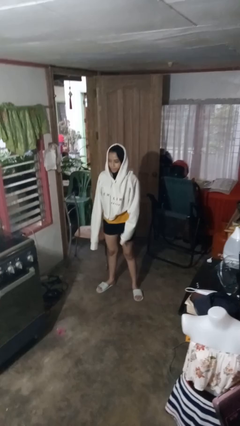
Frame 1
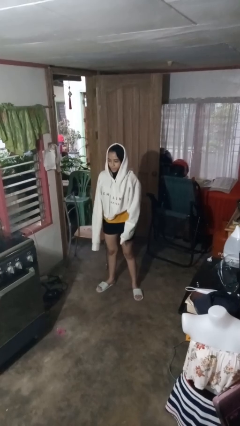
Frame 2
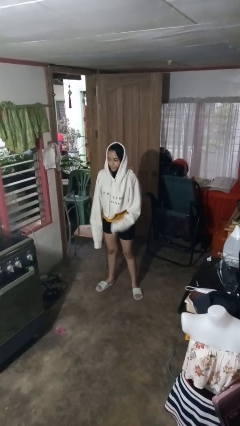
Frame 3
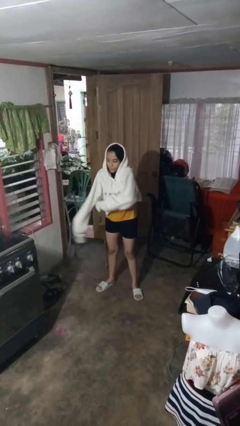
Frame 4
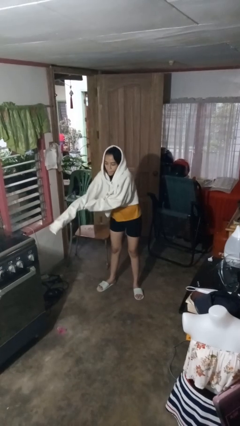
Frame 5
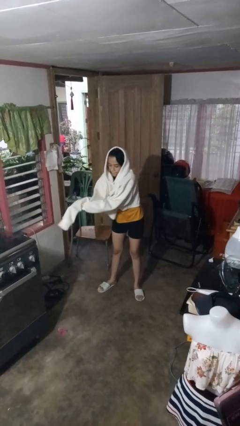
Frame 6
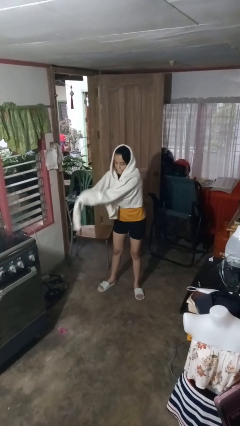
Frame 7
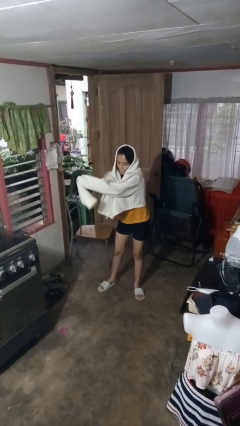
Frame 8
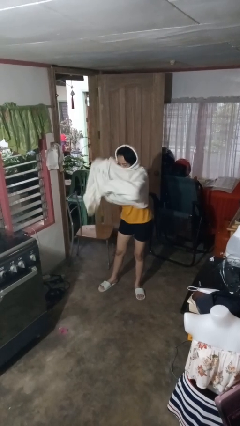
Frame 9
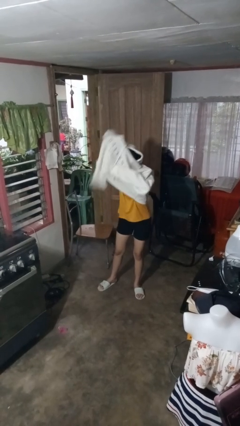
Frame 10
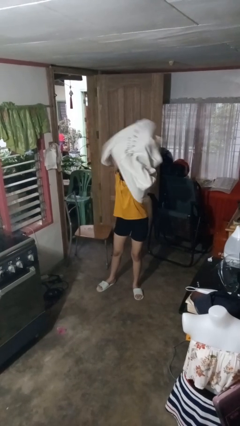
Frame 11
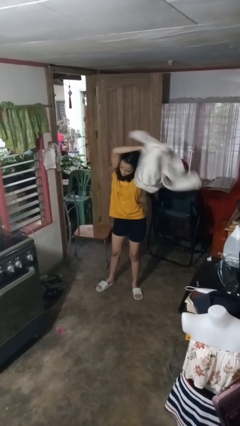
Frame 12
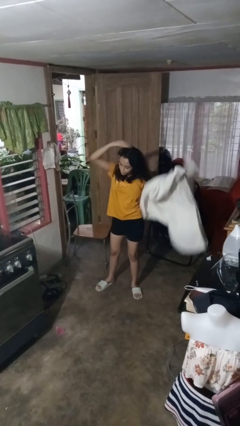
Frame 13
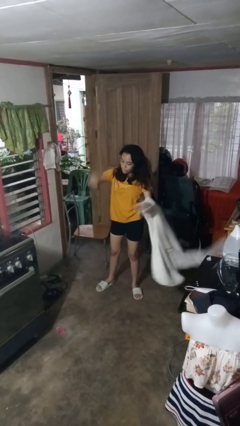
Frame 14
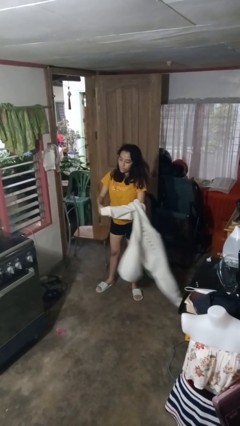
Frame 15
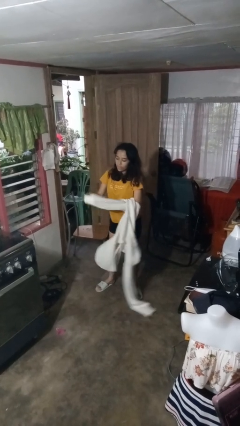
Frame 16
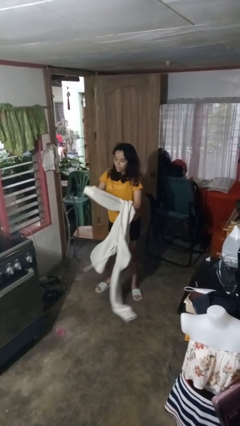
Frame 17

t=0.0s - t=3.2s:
person takes off hoodie

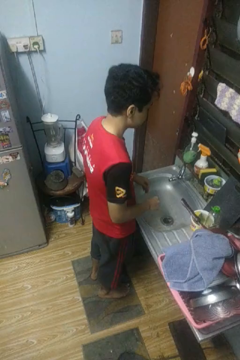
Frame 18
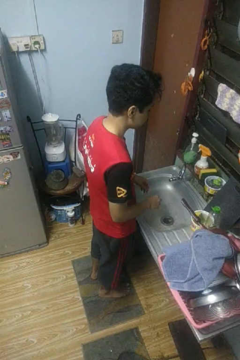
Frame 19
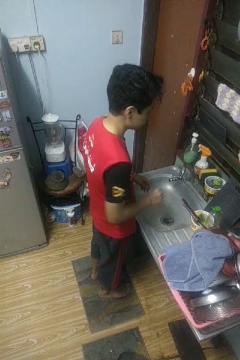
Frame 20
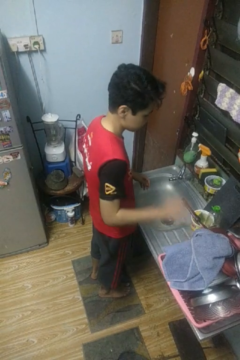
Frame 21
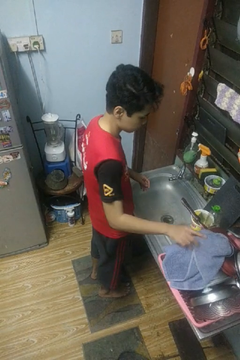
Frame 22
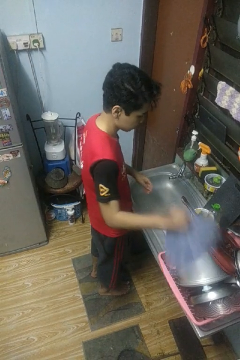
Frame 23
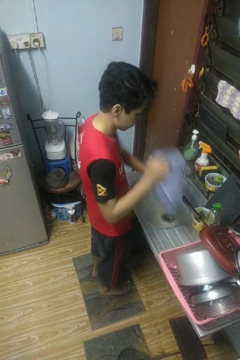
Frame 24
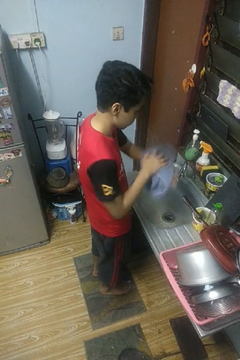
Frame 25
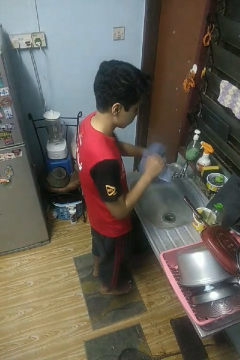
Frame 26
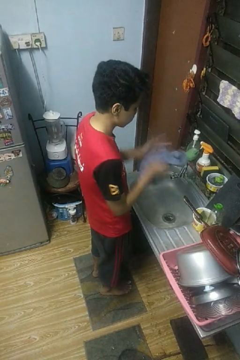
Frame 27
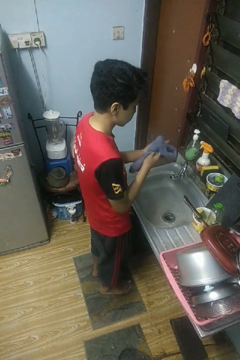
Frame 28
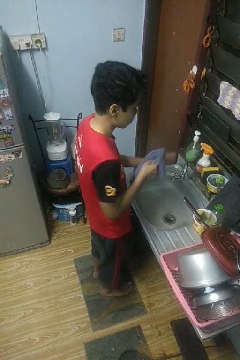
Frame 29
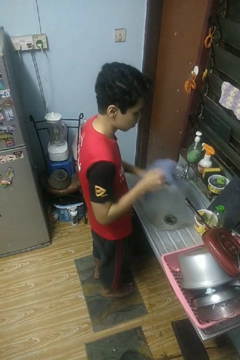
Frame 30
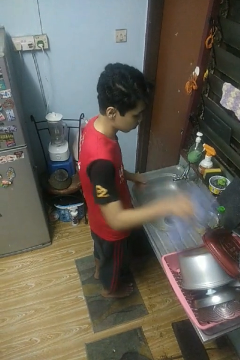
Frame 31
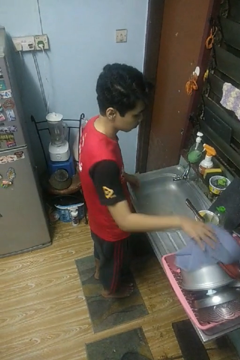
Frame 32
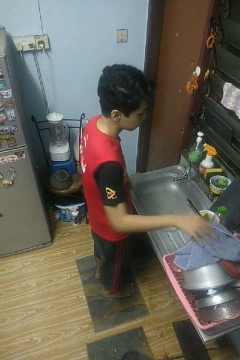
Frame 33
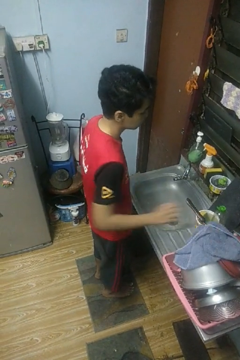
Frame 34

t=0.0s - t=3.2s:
person dries hands with towel

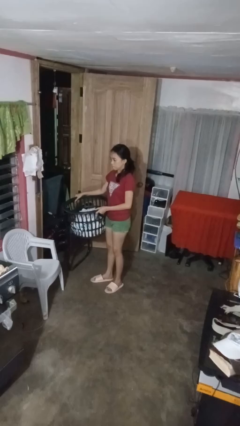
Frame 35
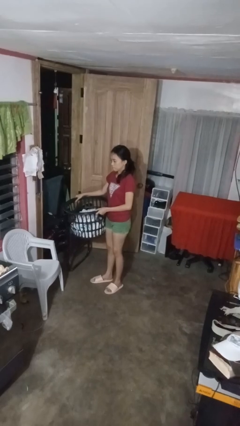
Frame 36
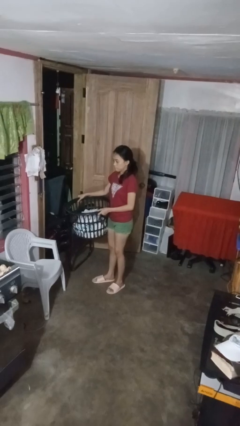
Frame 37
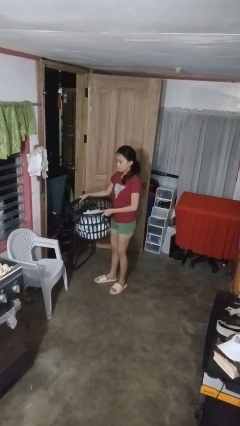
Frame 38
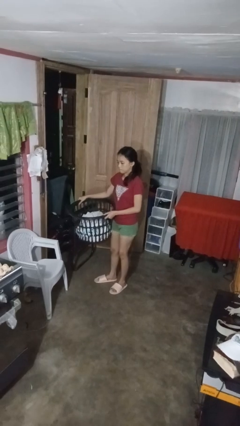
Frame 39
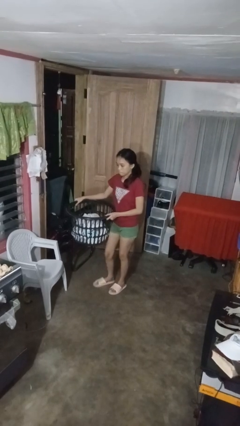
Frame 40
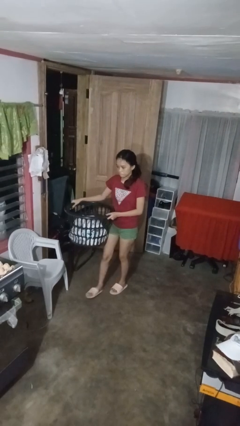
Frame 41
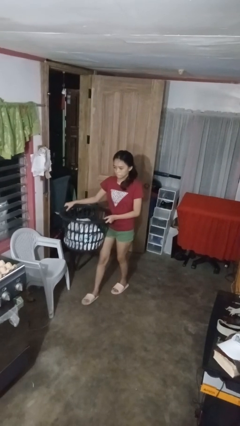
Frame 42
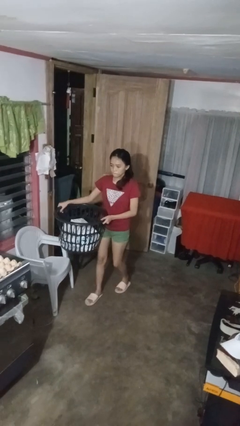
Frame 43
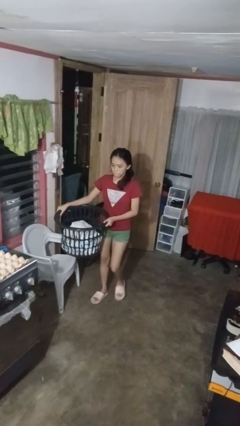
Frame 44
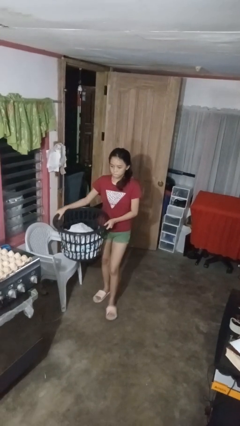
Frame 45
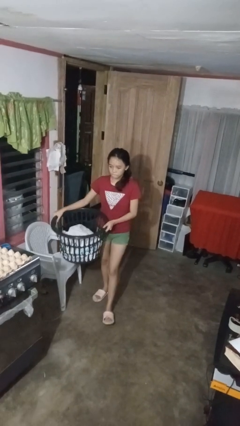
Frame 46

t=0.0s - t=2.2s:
person carries laundry basket

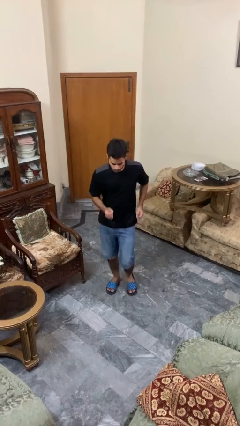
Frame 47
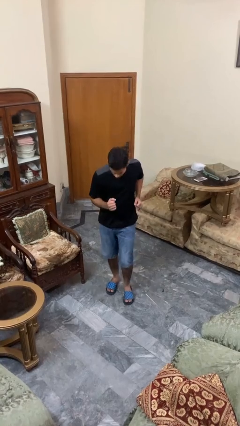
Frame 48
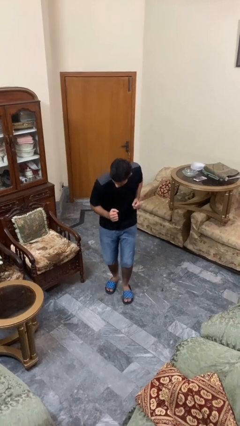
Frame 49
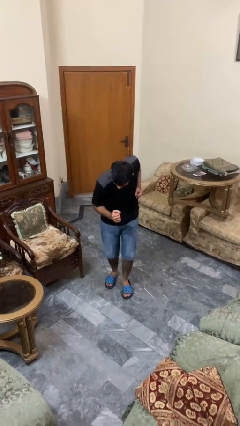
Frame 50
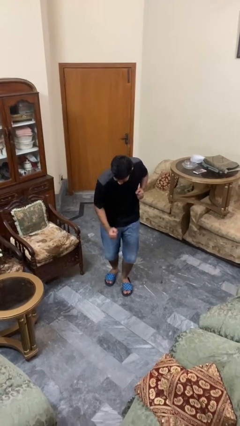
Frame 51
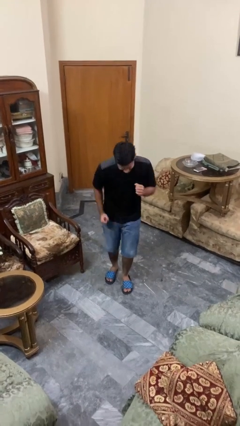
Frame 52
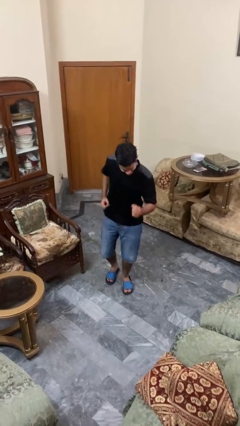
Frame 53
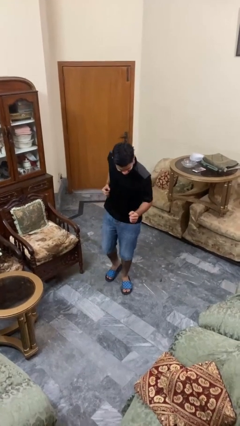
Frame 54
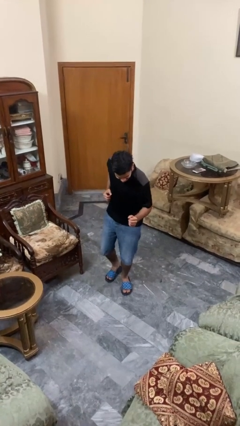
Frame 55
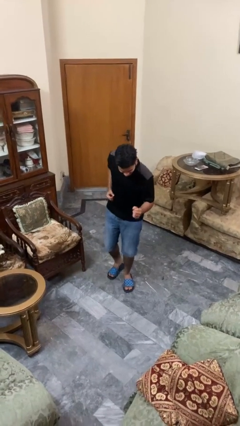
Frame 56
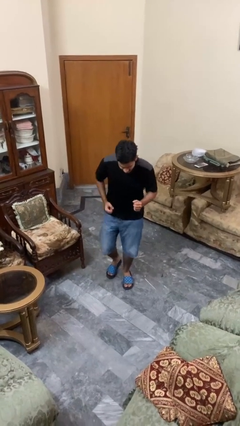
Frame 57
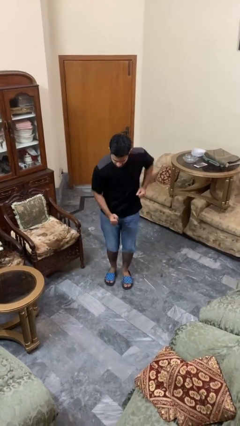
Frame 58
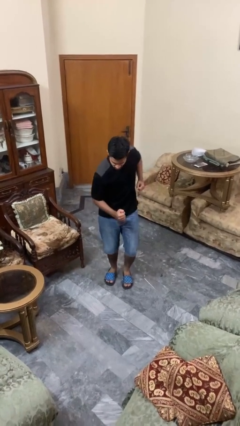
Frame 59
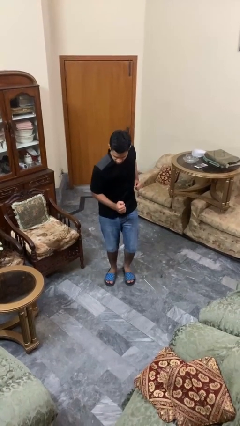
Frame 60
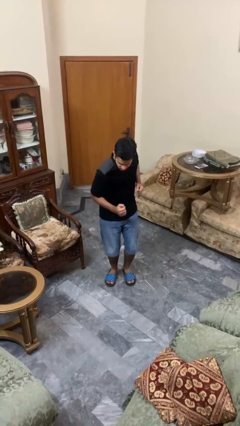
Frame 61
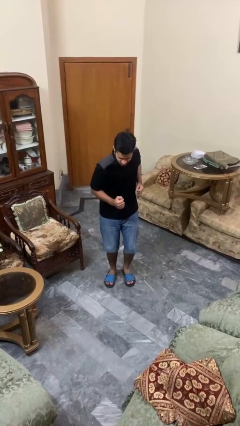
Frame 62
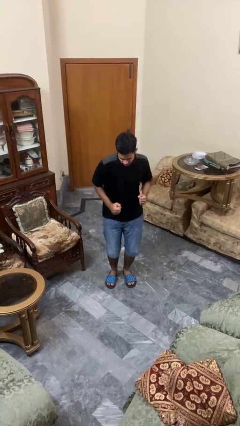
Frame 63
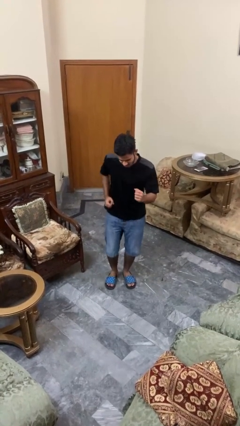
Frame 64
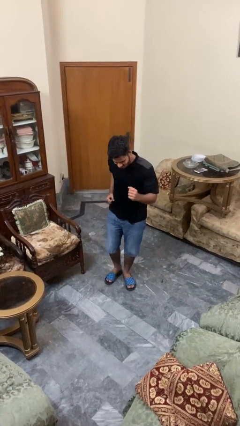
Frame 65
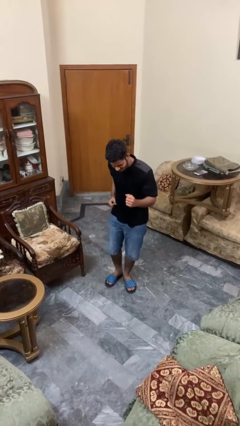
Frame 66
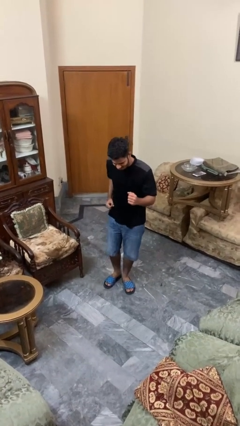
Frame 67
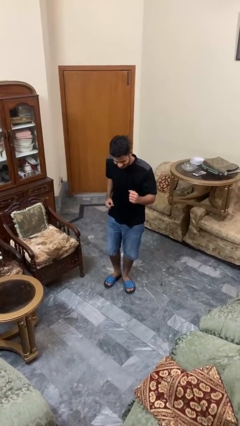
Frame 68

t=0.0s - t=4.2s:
person dances in place

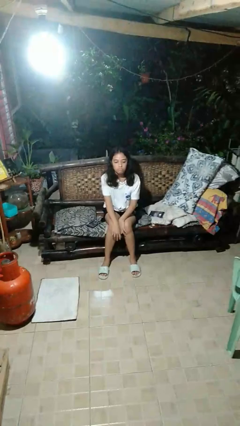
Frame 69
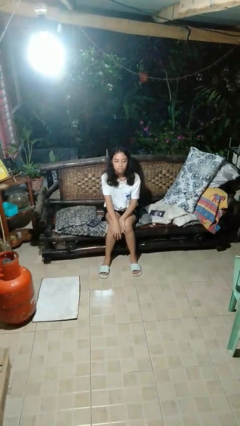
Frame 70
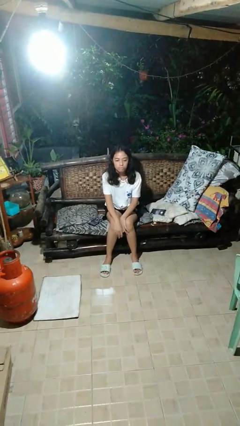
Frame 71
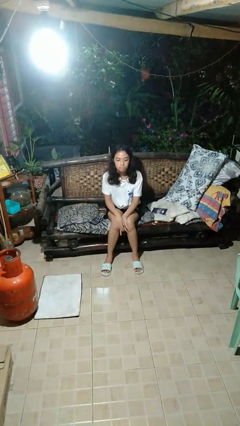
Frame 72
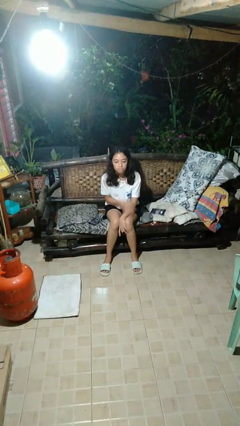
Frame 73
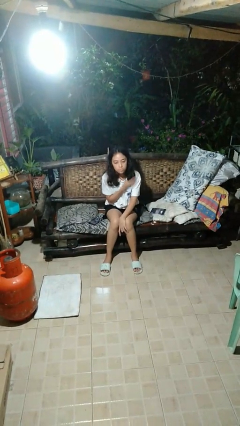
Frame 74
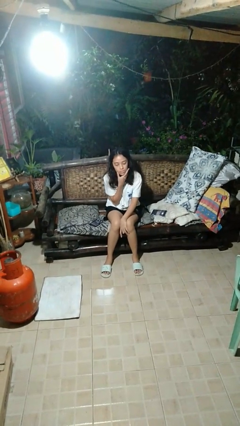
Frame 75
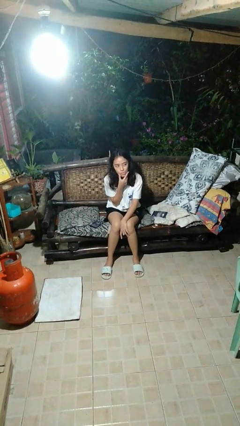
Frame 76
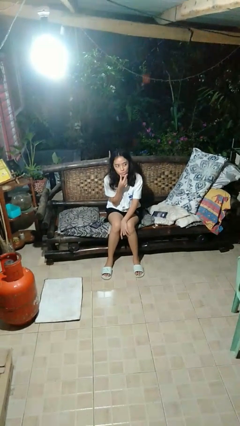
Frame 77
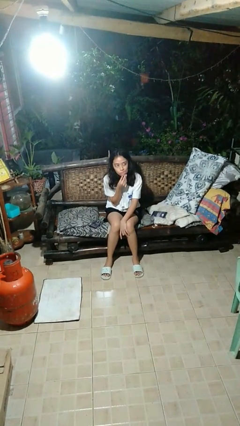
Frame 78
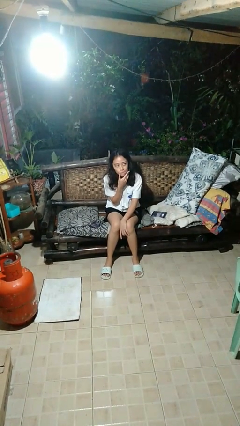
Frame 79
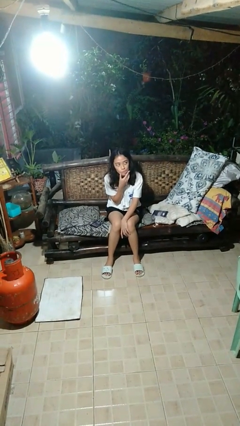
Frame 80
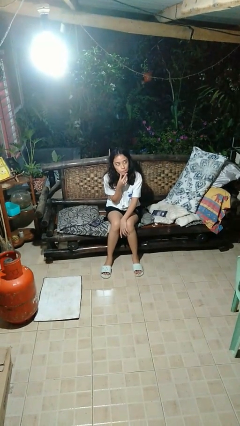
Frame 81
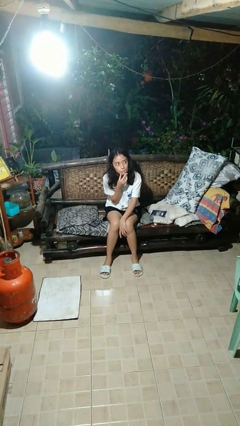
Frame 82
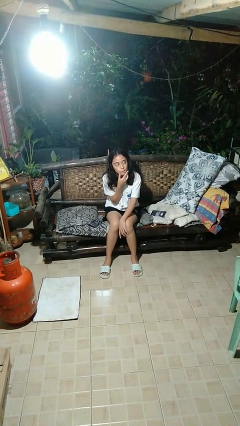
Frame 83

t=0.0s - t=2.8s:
person strokes chin

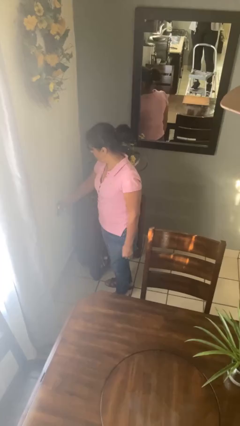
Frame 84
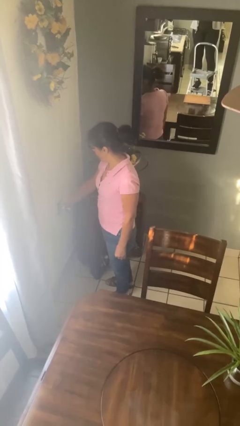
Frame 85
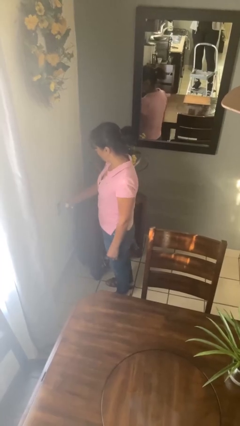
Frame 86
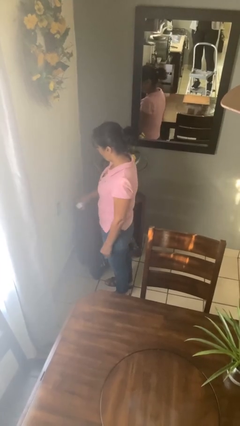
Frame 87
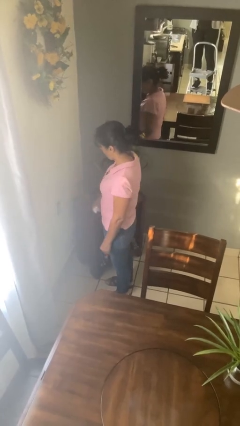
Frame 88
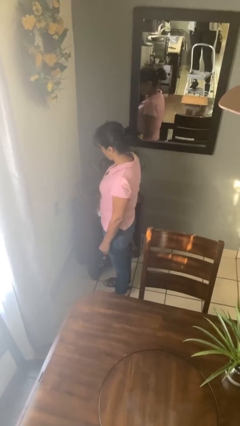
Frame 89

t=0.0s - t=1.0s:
person unplugs from electrical socket

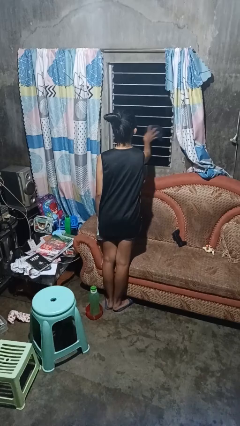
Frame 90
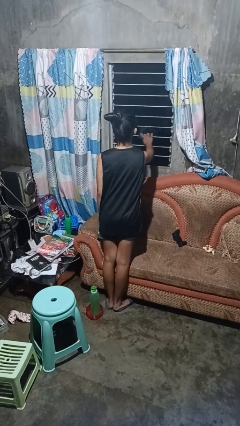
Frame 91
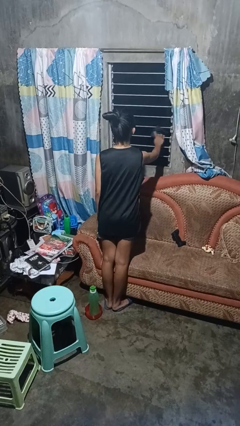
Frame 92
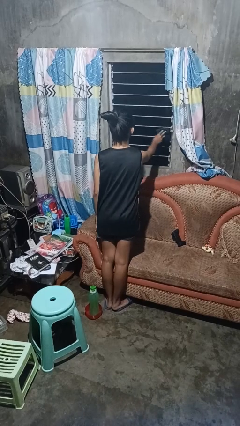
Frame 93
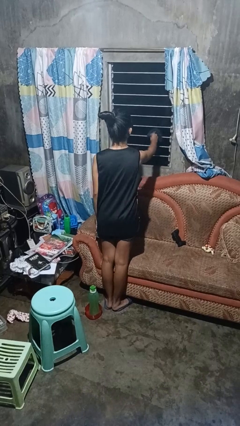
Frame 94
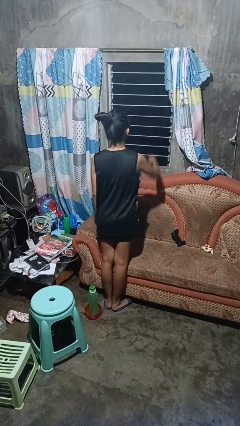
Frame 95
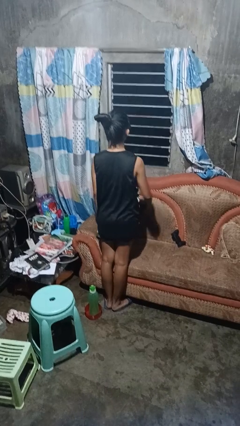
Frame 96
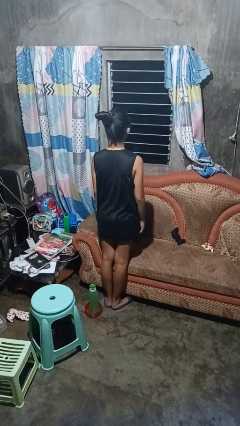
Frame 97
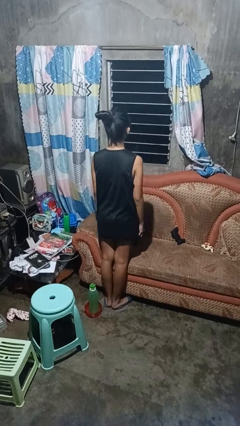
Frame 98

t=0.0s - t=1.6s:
person washes window
